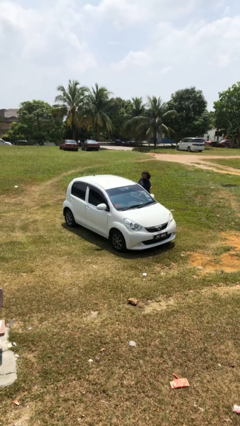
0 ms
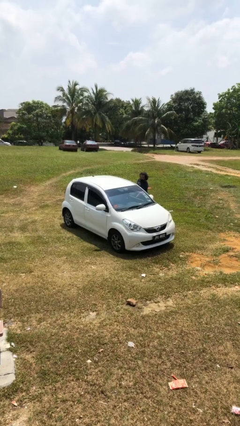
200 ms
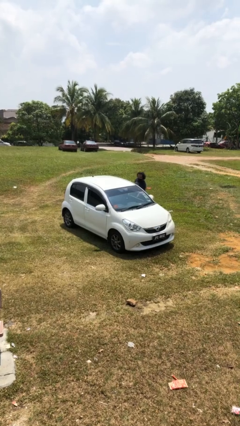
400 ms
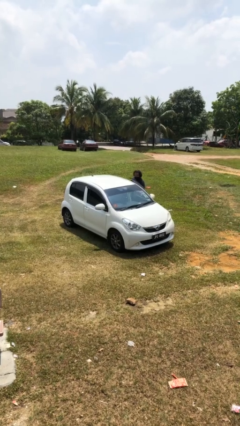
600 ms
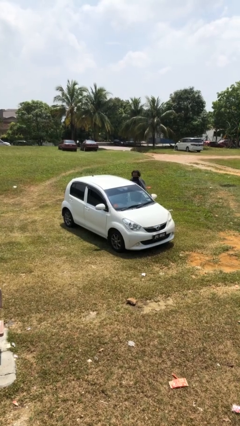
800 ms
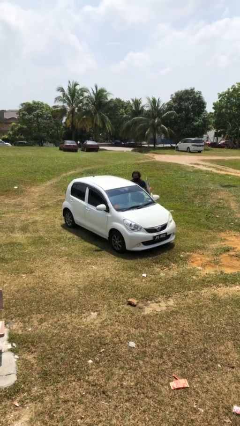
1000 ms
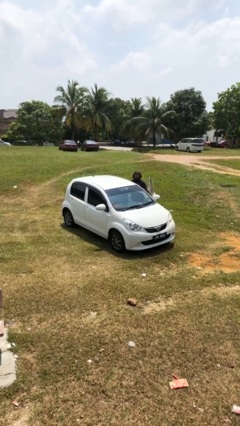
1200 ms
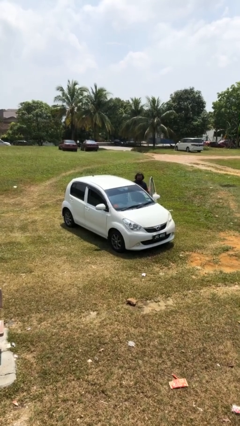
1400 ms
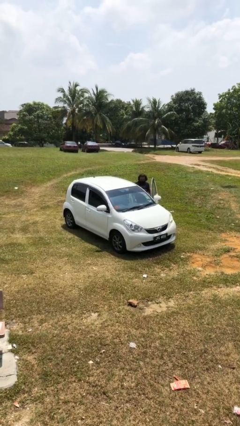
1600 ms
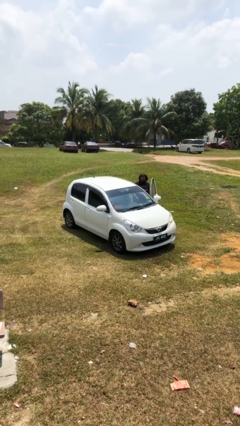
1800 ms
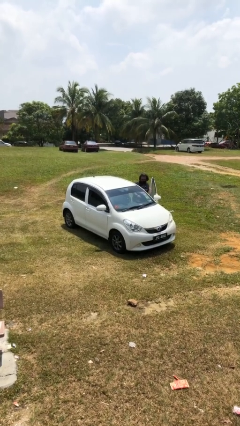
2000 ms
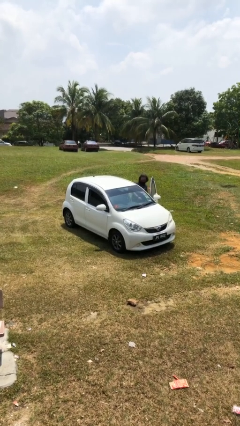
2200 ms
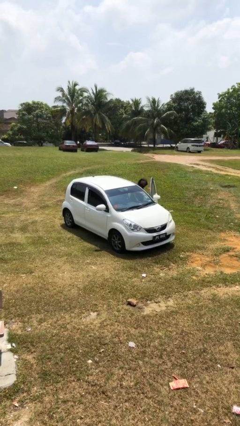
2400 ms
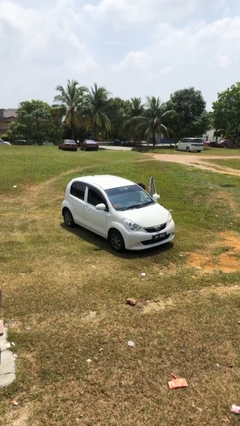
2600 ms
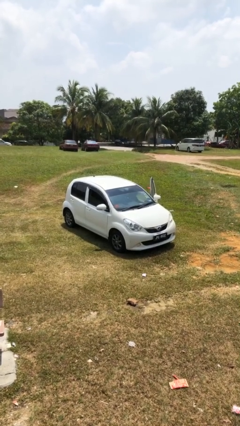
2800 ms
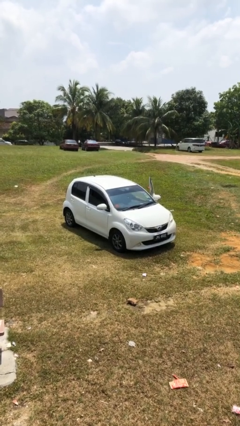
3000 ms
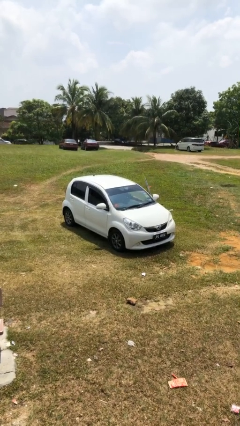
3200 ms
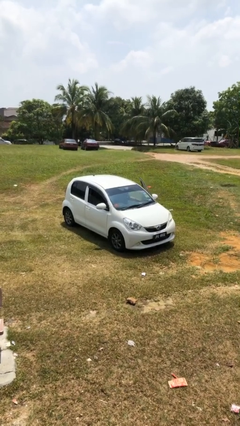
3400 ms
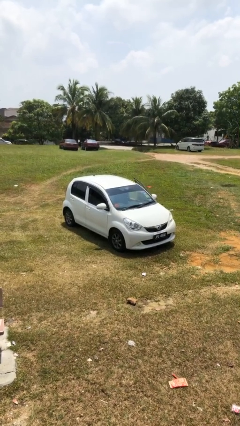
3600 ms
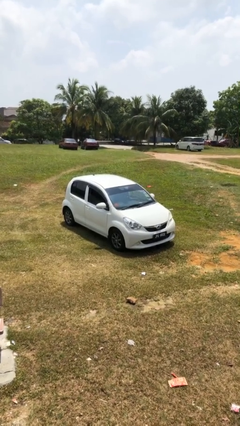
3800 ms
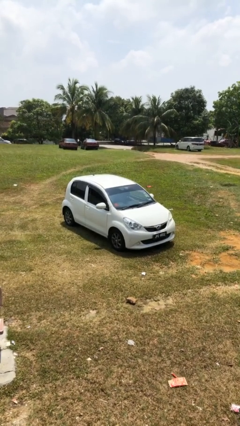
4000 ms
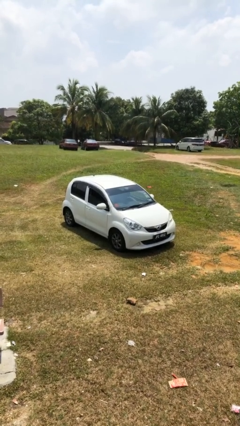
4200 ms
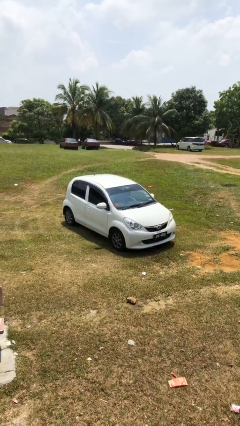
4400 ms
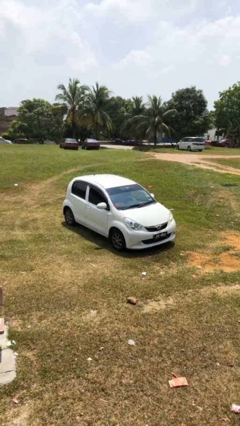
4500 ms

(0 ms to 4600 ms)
car picks up person

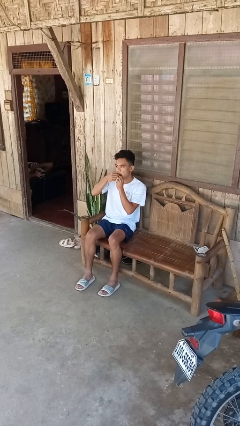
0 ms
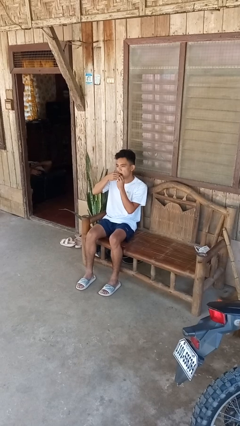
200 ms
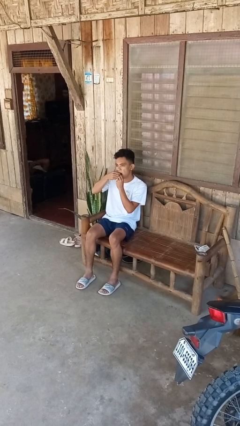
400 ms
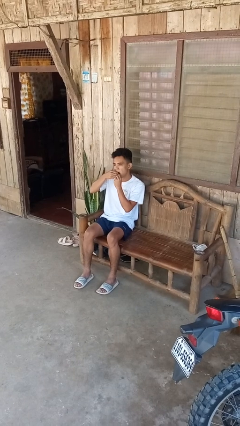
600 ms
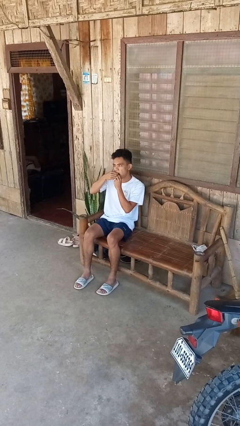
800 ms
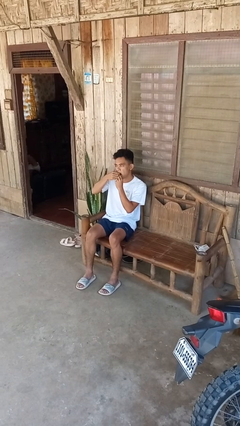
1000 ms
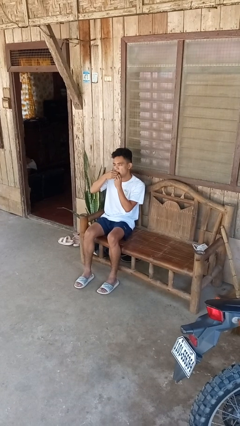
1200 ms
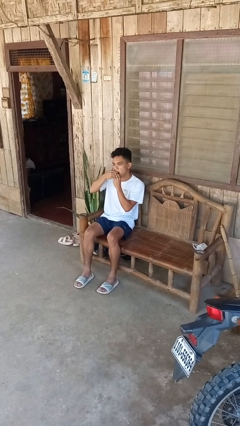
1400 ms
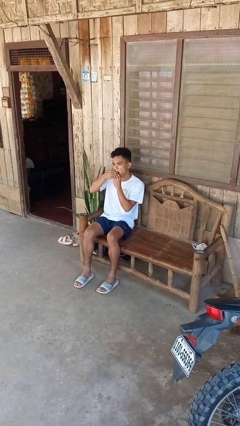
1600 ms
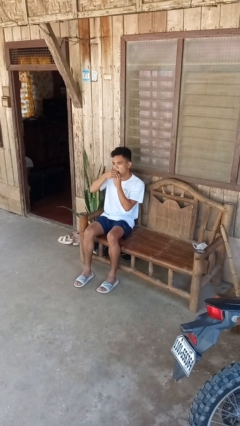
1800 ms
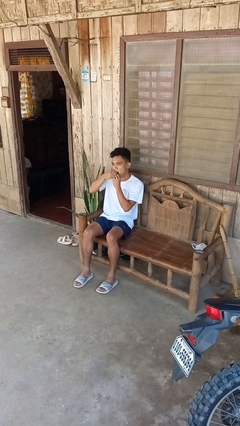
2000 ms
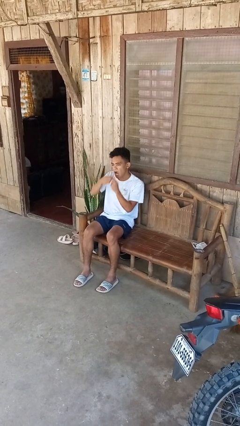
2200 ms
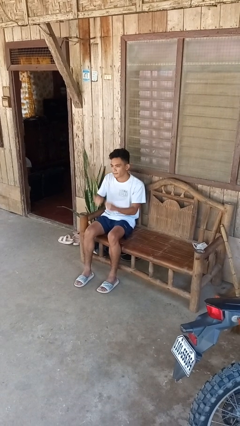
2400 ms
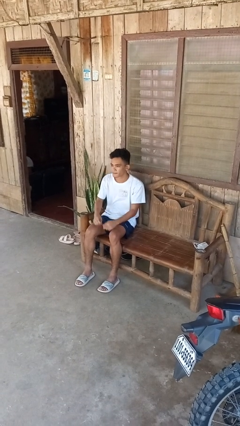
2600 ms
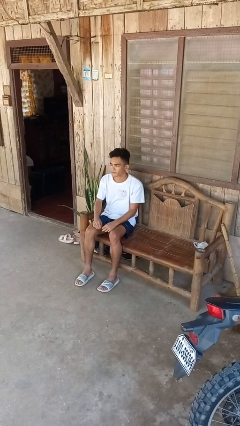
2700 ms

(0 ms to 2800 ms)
person flosses

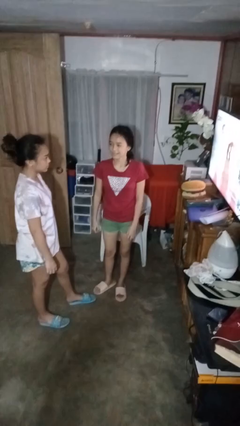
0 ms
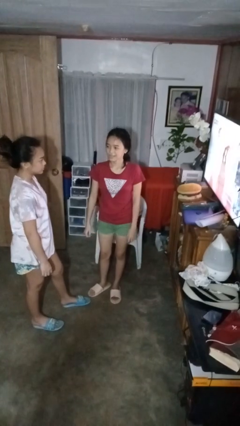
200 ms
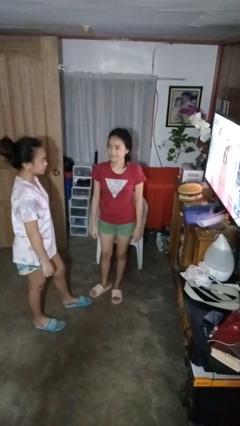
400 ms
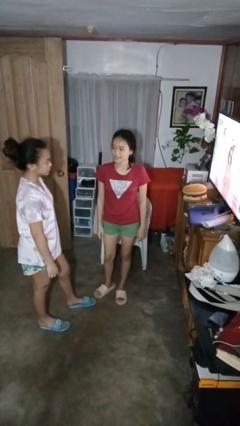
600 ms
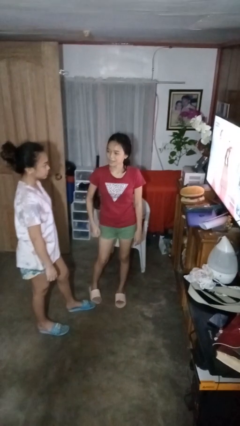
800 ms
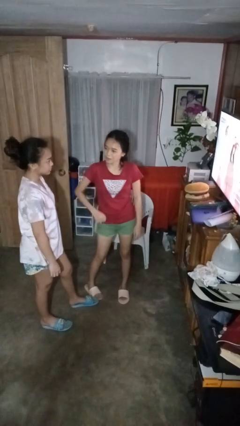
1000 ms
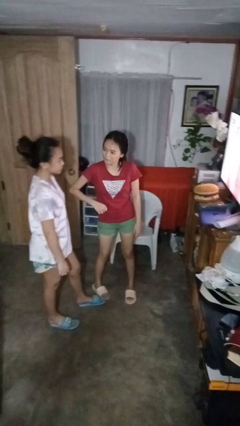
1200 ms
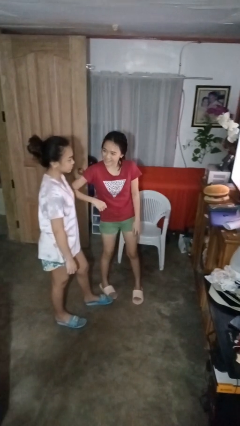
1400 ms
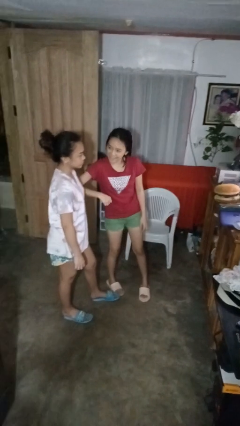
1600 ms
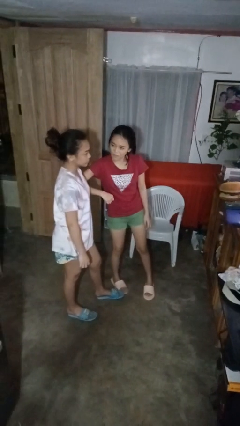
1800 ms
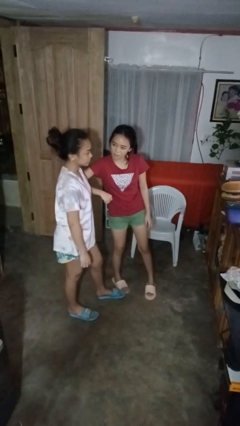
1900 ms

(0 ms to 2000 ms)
person nudges person with elbow

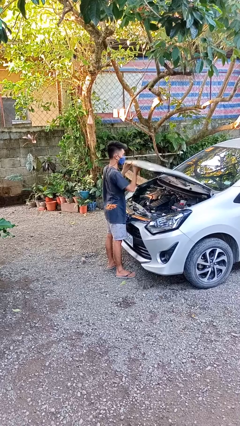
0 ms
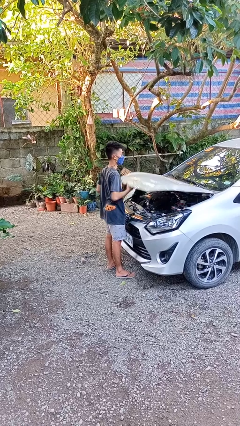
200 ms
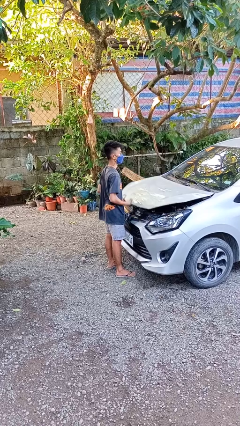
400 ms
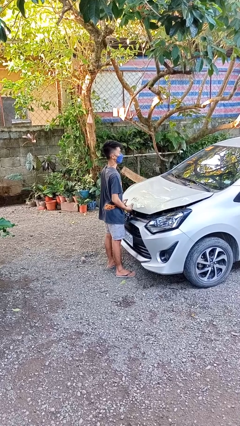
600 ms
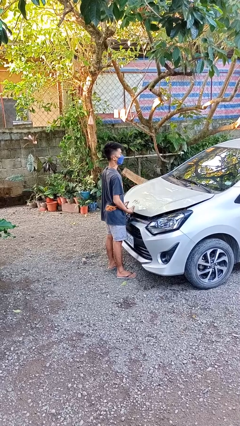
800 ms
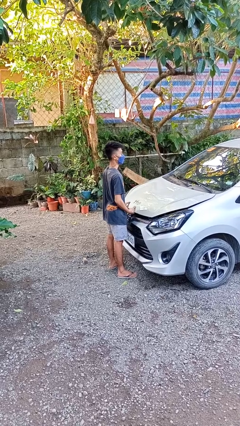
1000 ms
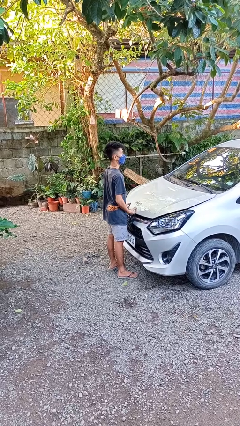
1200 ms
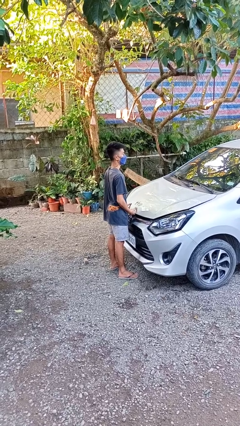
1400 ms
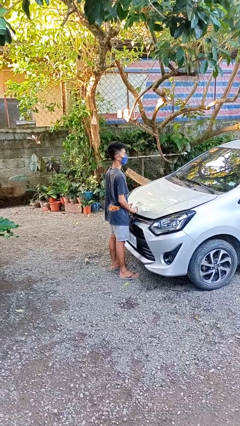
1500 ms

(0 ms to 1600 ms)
person closes car hood

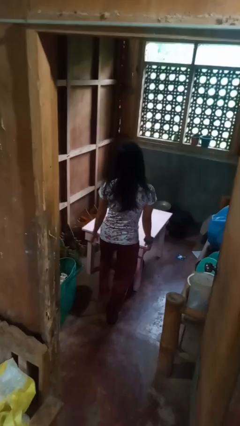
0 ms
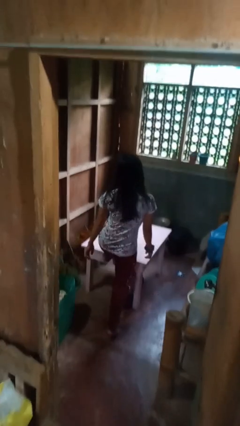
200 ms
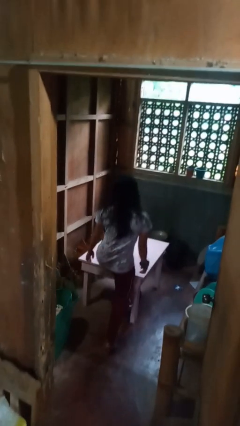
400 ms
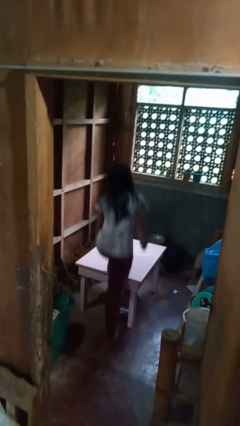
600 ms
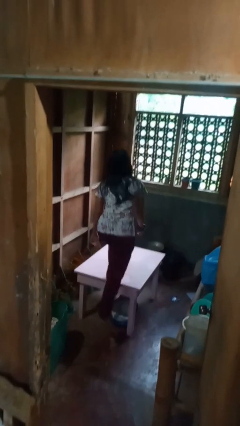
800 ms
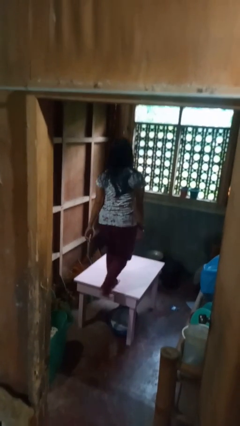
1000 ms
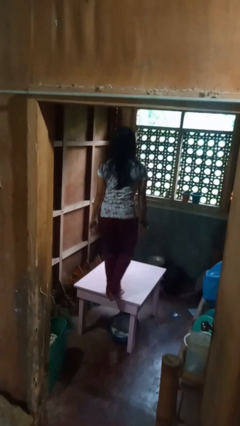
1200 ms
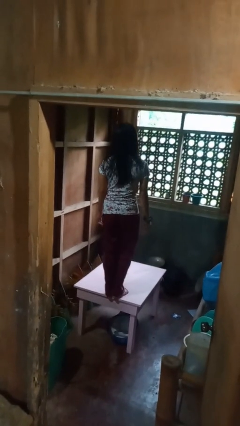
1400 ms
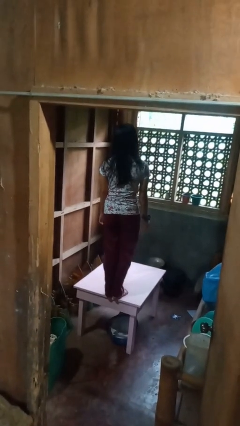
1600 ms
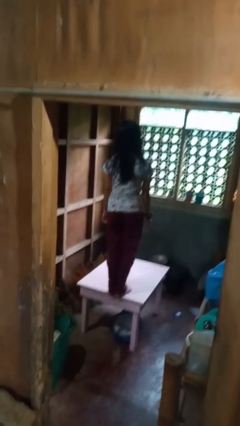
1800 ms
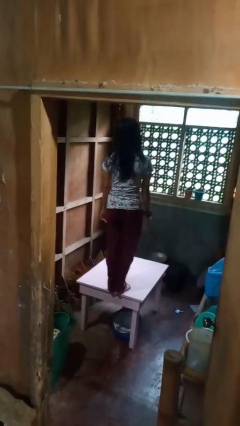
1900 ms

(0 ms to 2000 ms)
person climbs on table

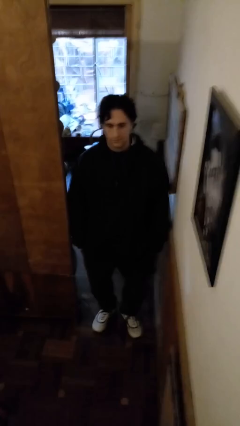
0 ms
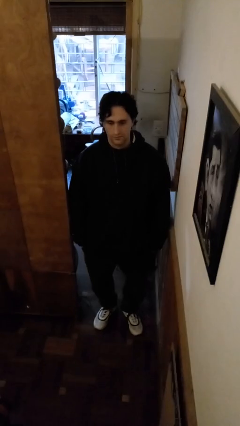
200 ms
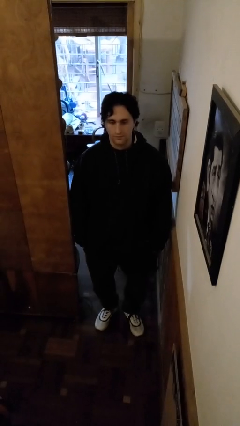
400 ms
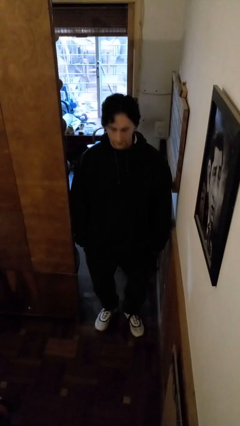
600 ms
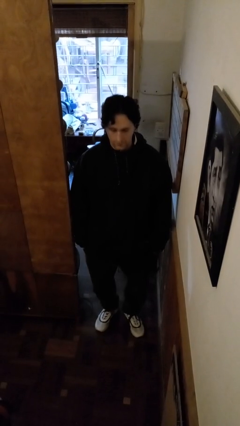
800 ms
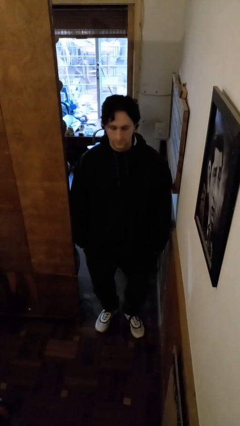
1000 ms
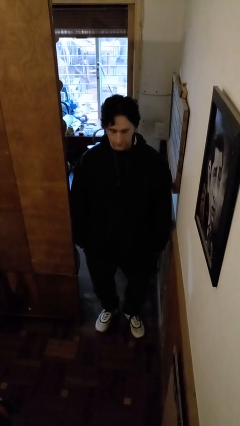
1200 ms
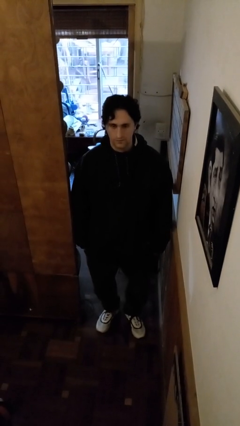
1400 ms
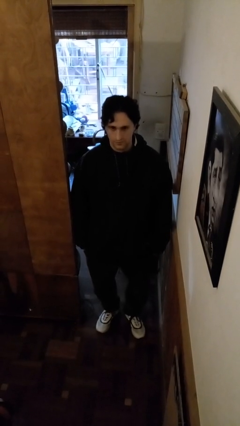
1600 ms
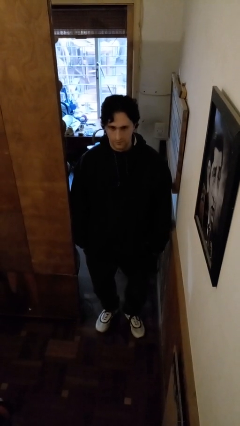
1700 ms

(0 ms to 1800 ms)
person nods head

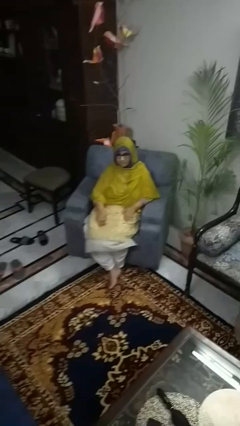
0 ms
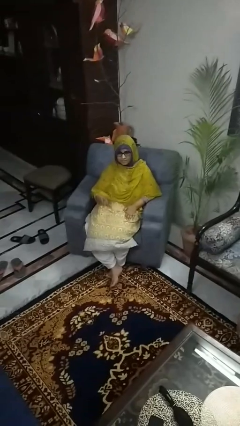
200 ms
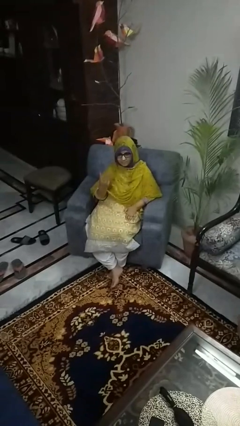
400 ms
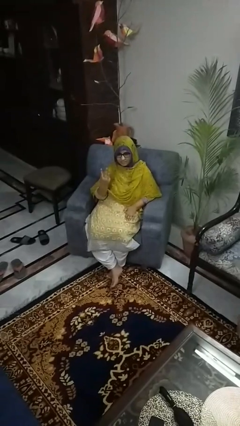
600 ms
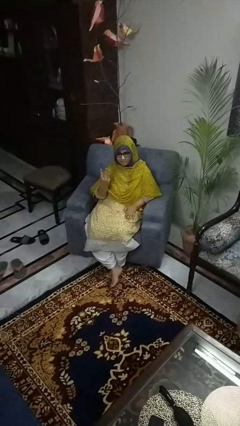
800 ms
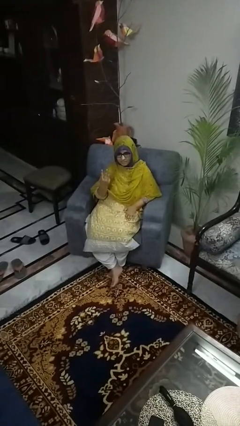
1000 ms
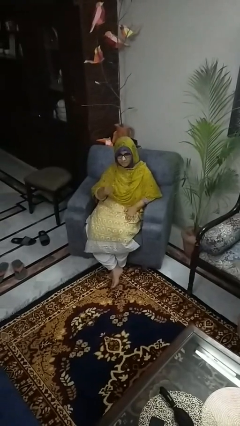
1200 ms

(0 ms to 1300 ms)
person gestures number three

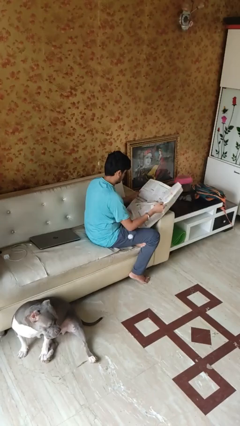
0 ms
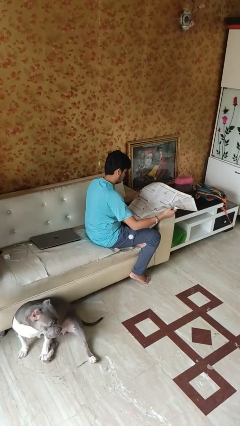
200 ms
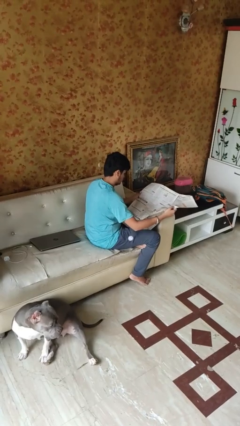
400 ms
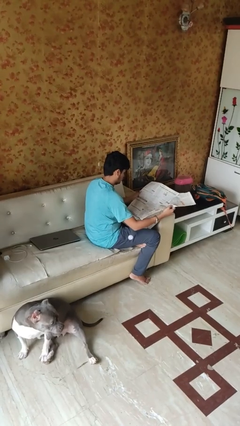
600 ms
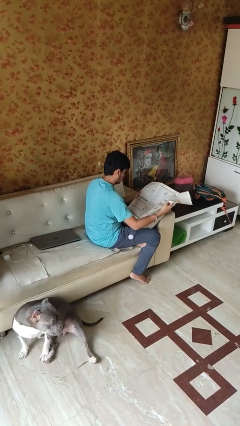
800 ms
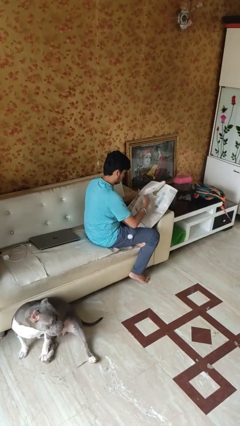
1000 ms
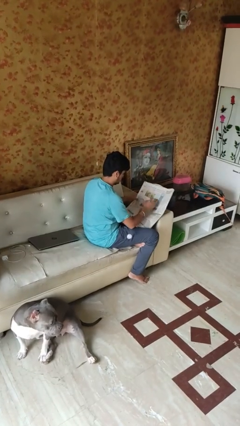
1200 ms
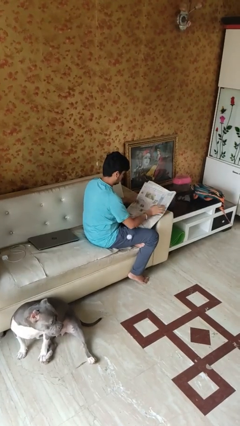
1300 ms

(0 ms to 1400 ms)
person reads newspaper
